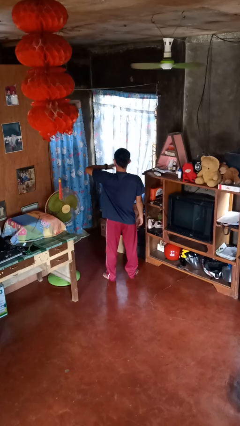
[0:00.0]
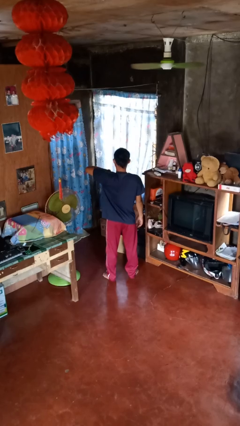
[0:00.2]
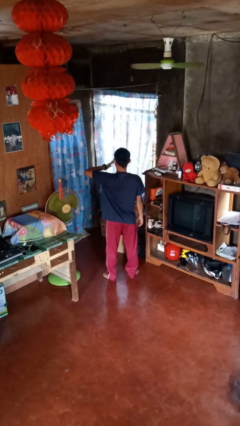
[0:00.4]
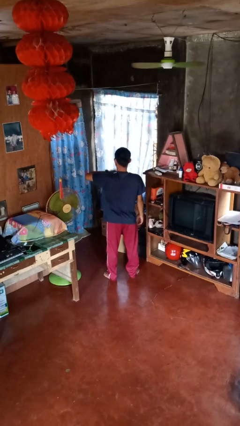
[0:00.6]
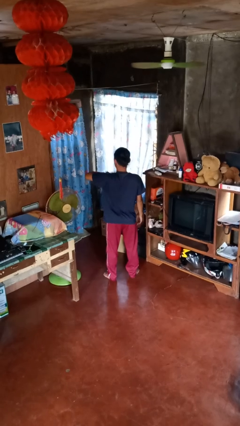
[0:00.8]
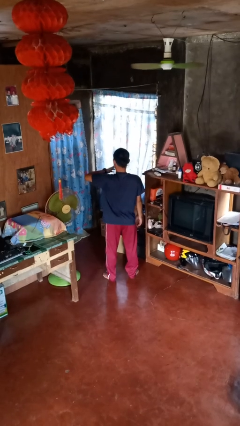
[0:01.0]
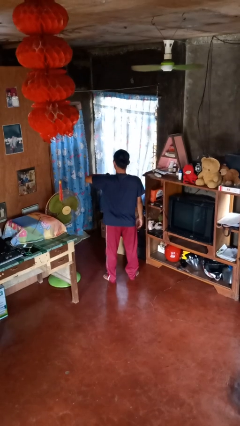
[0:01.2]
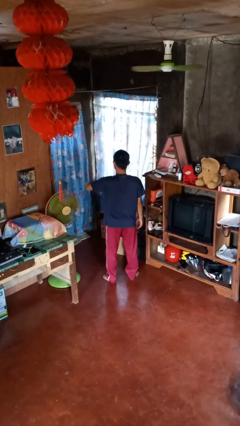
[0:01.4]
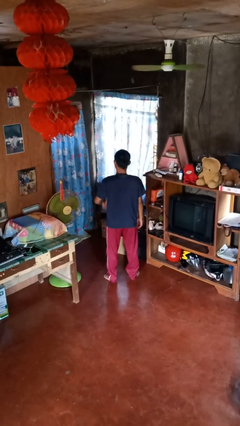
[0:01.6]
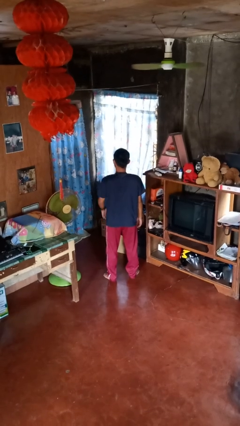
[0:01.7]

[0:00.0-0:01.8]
person drums on chest

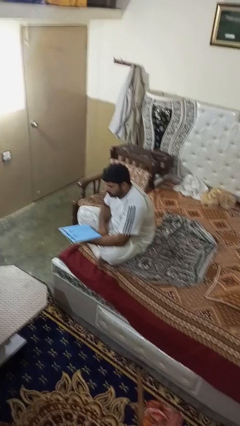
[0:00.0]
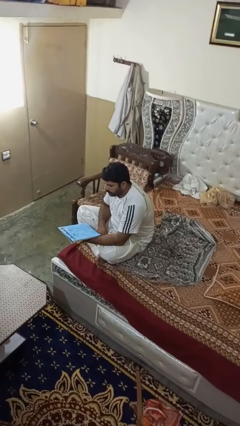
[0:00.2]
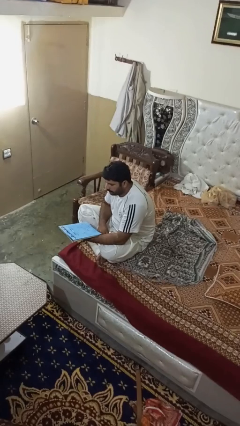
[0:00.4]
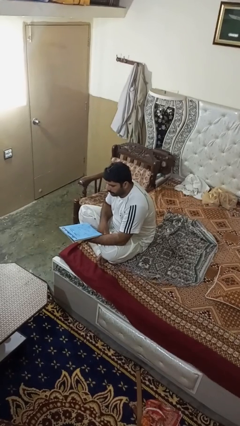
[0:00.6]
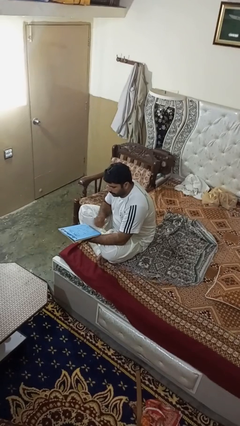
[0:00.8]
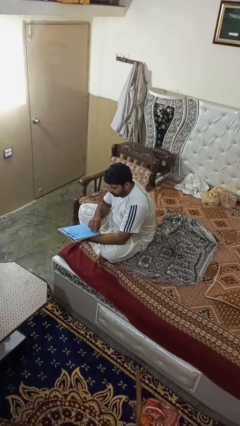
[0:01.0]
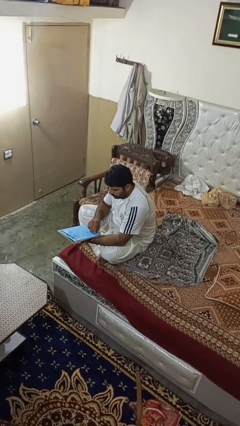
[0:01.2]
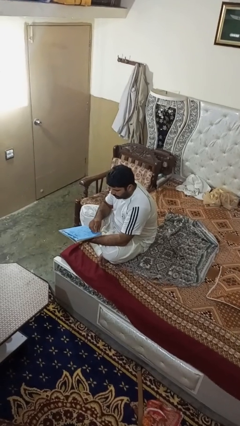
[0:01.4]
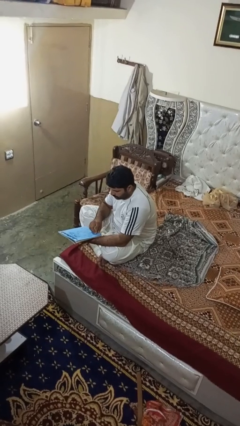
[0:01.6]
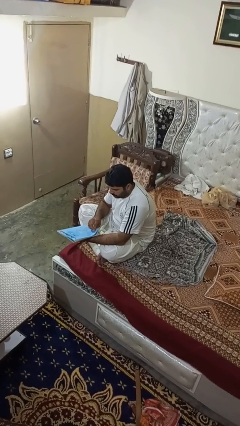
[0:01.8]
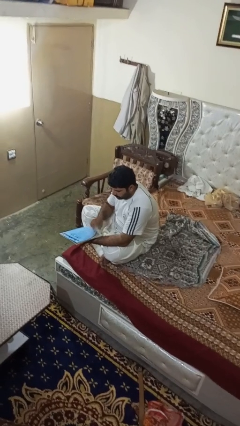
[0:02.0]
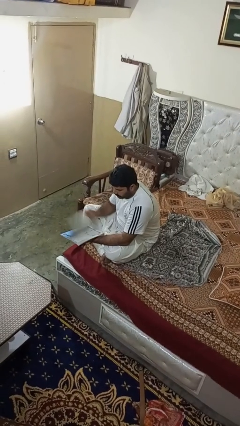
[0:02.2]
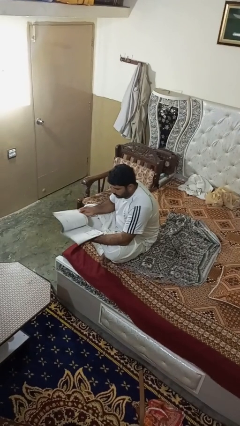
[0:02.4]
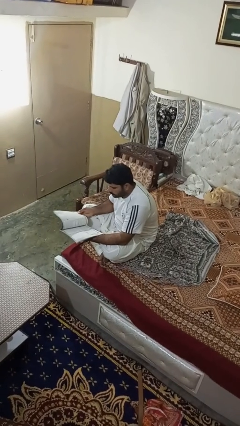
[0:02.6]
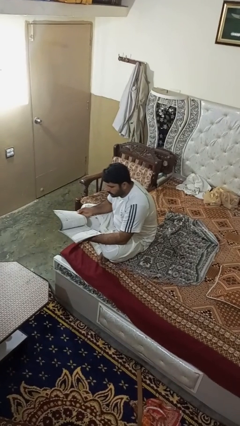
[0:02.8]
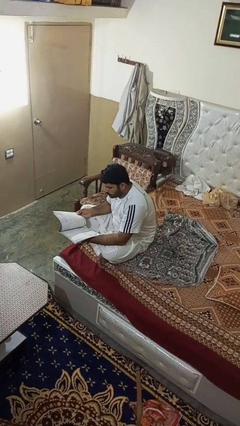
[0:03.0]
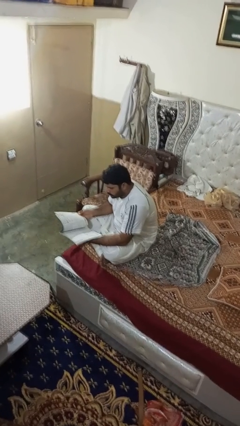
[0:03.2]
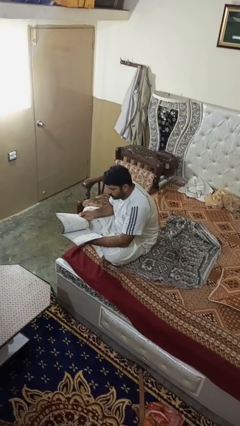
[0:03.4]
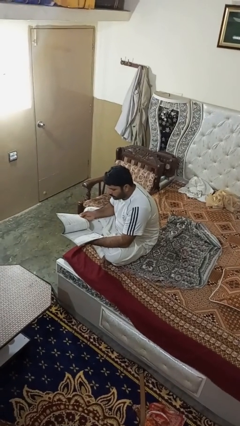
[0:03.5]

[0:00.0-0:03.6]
person reads magazine

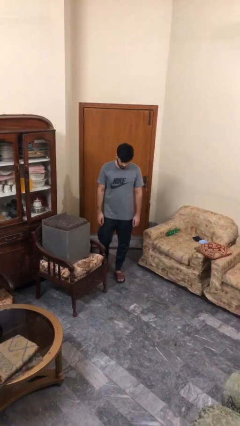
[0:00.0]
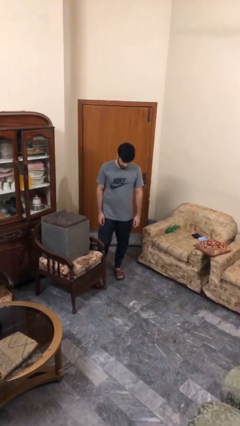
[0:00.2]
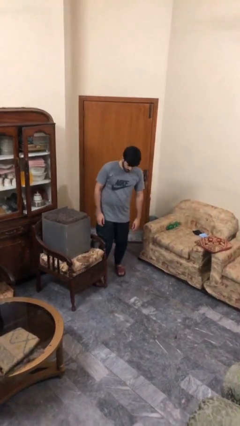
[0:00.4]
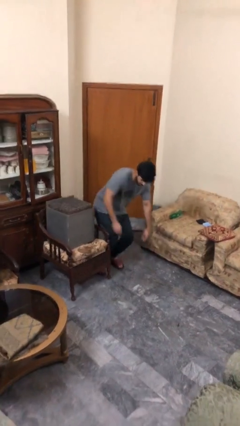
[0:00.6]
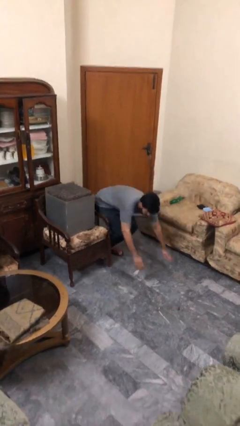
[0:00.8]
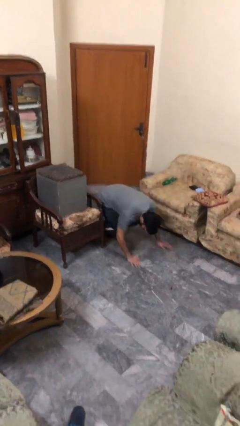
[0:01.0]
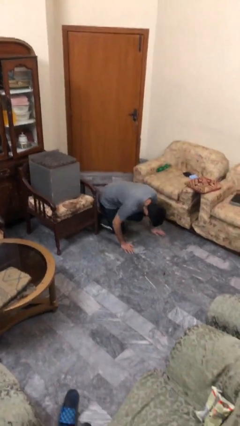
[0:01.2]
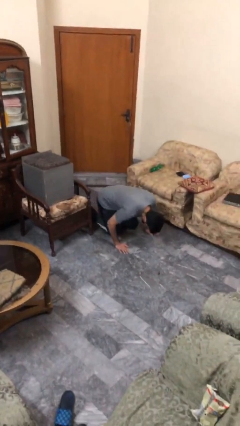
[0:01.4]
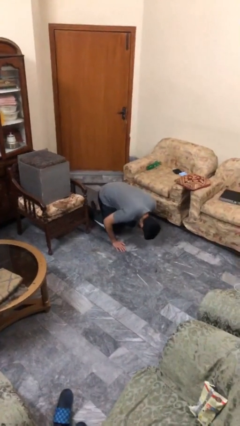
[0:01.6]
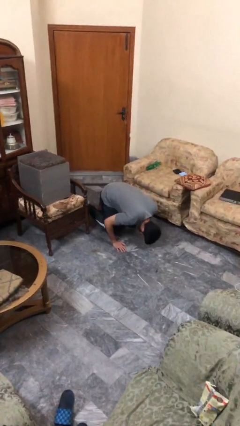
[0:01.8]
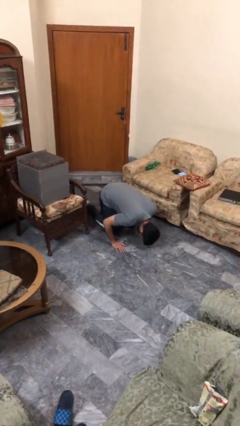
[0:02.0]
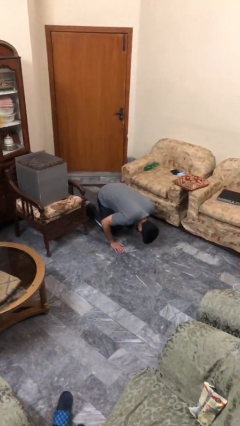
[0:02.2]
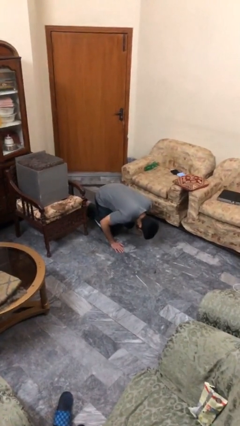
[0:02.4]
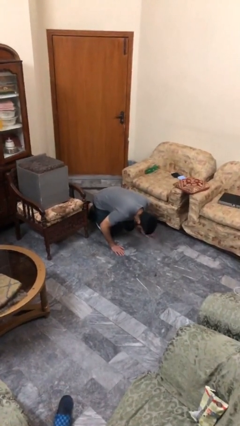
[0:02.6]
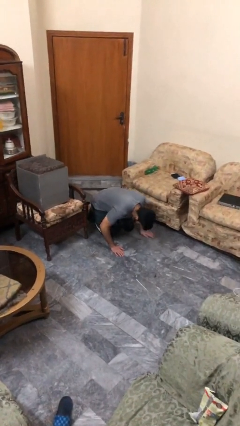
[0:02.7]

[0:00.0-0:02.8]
person trips on object on floor

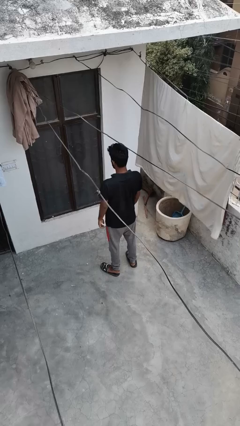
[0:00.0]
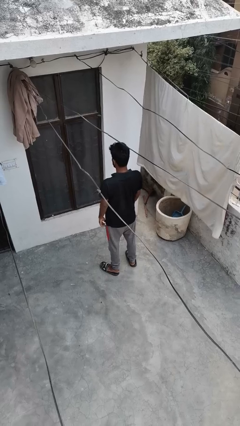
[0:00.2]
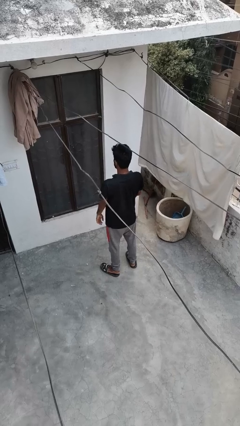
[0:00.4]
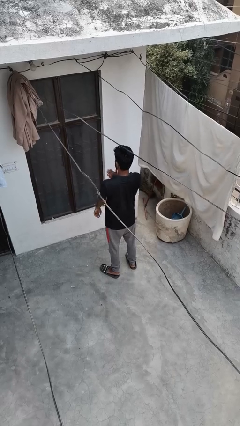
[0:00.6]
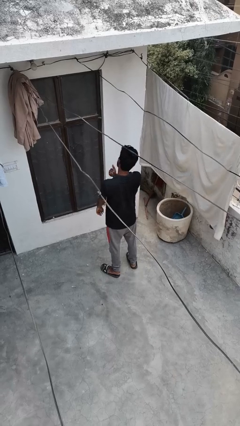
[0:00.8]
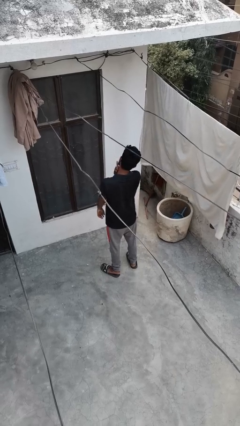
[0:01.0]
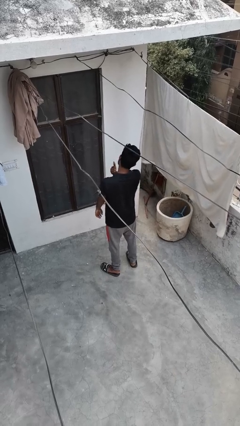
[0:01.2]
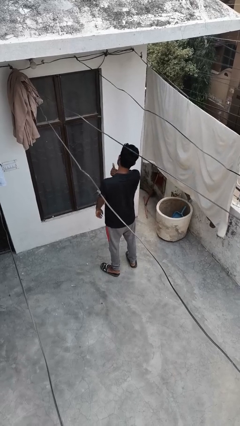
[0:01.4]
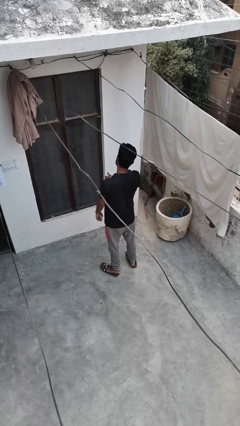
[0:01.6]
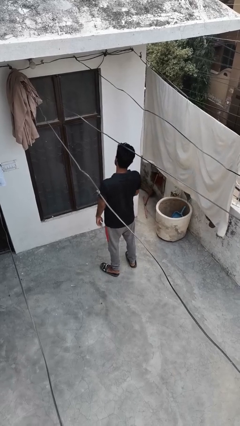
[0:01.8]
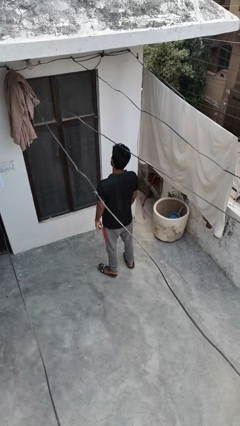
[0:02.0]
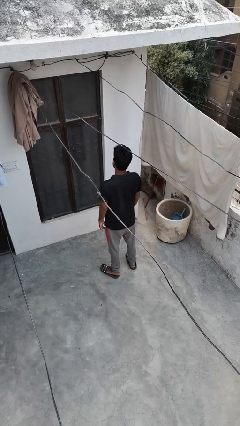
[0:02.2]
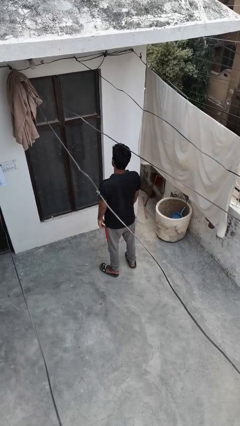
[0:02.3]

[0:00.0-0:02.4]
person swats bug

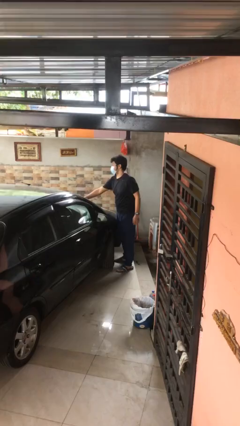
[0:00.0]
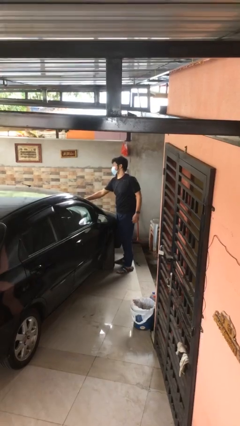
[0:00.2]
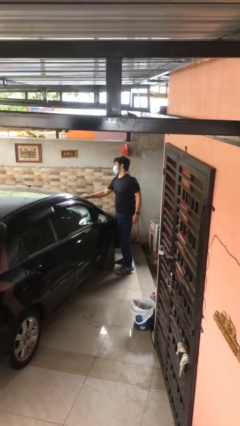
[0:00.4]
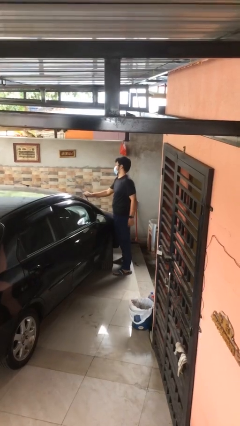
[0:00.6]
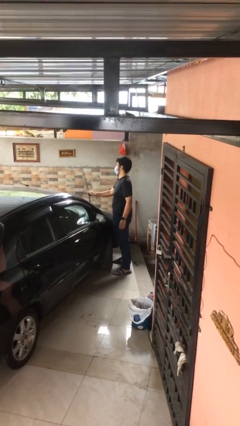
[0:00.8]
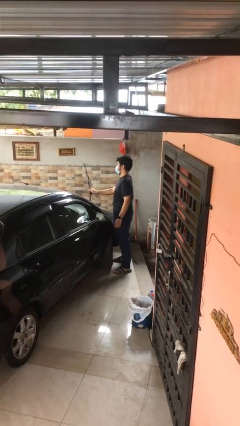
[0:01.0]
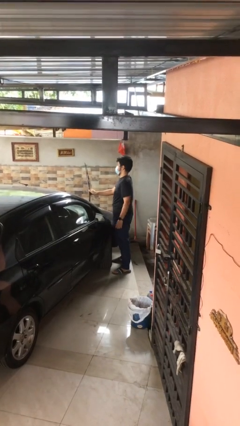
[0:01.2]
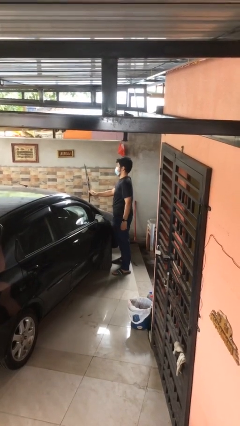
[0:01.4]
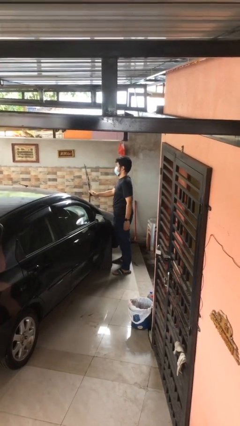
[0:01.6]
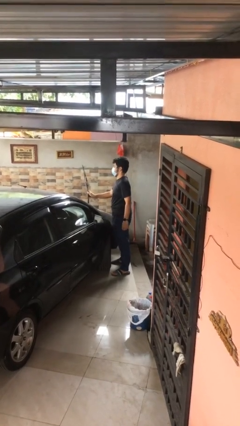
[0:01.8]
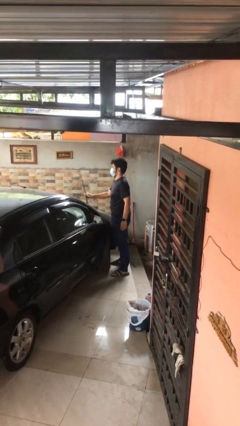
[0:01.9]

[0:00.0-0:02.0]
person flips up car wipers

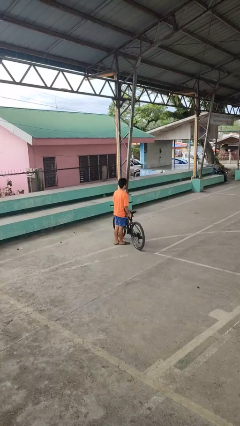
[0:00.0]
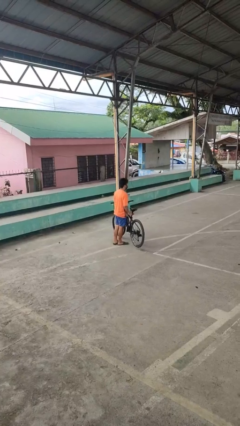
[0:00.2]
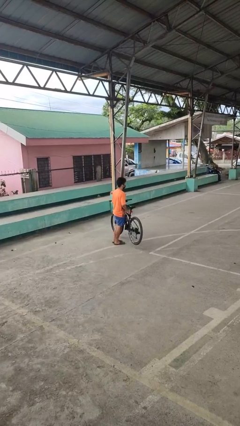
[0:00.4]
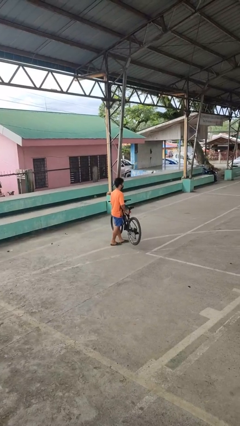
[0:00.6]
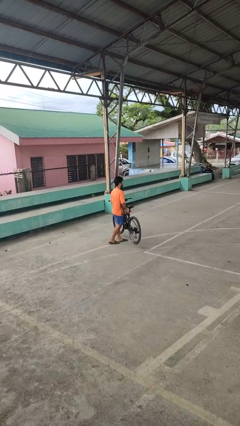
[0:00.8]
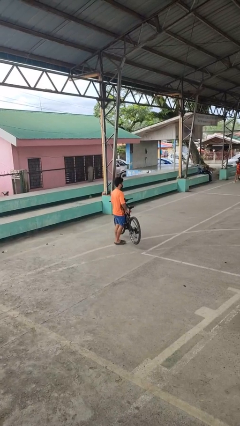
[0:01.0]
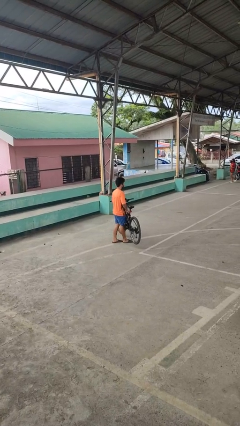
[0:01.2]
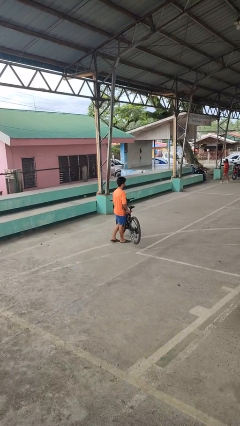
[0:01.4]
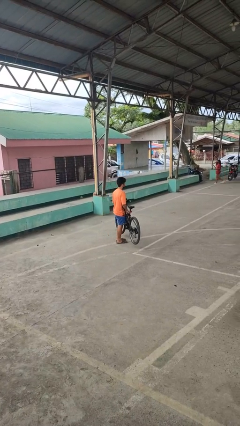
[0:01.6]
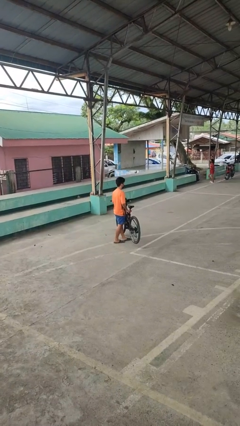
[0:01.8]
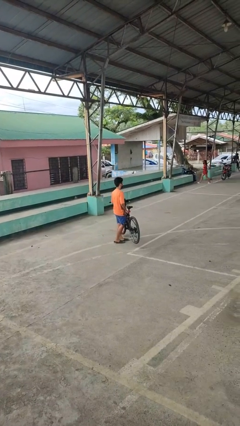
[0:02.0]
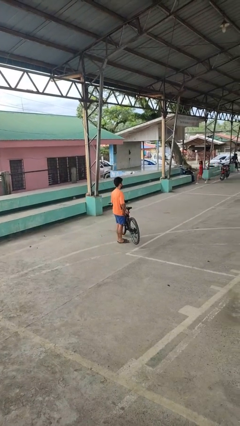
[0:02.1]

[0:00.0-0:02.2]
person carries bicycle

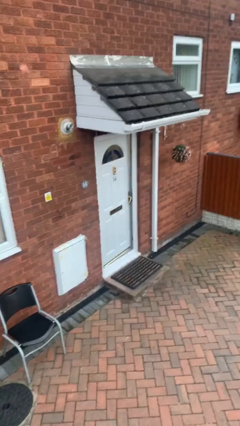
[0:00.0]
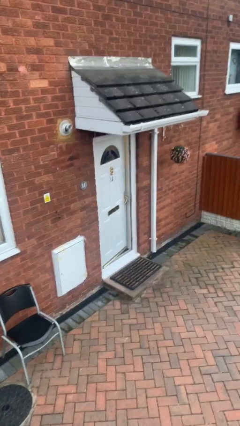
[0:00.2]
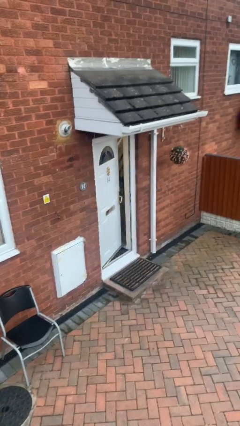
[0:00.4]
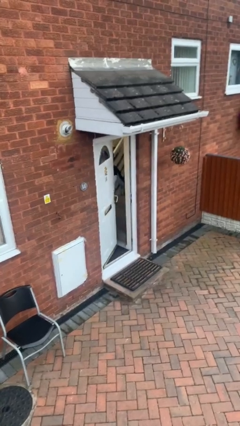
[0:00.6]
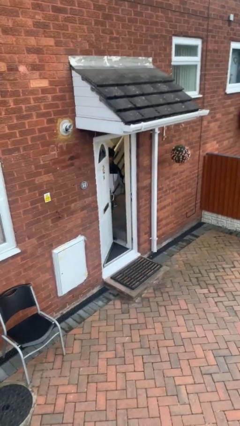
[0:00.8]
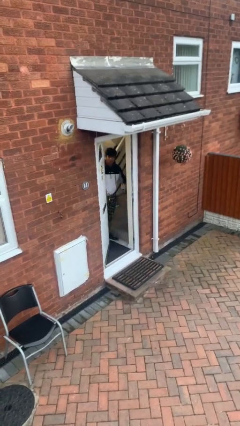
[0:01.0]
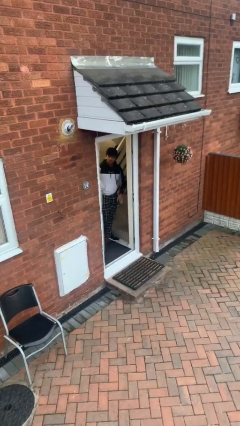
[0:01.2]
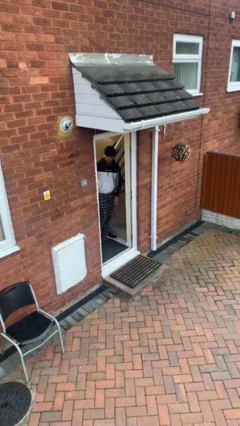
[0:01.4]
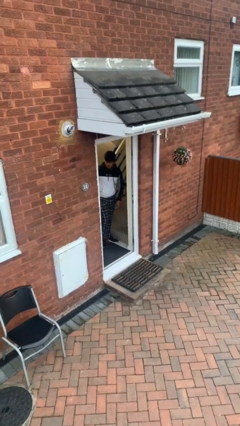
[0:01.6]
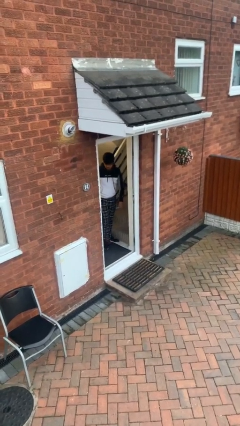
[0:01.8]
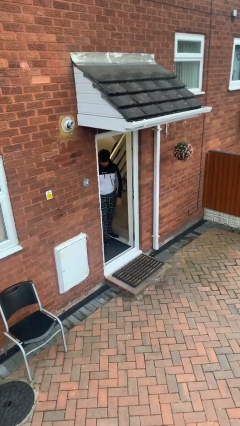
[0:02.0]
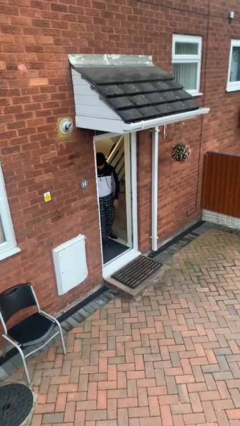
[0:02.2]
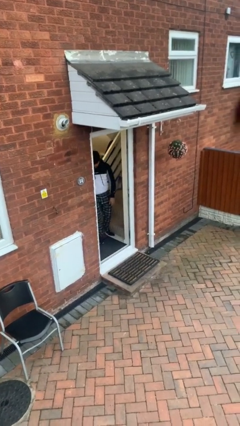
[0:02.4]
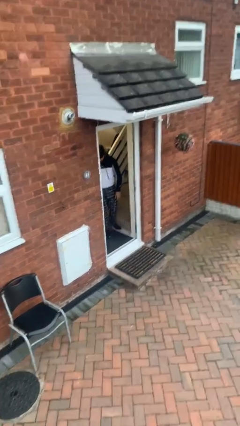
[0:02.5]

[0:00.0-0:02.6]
person opens facility door
